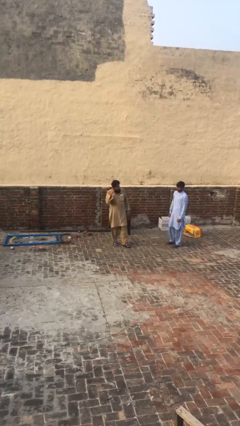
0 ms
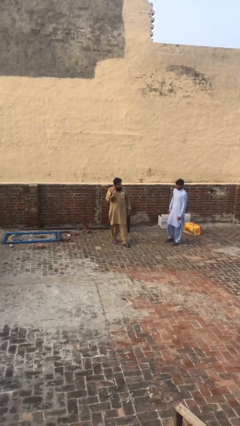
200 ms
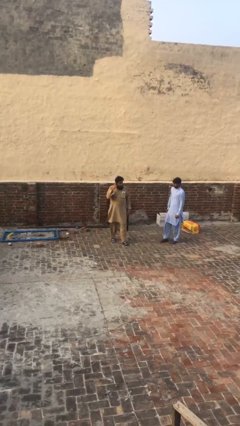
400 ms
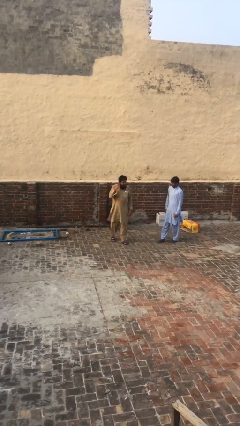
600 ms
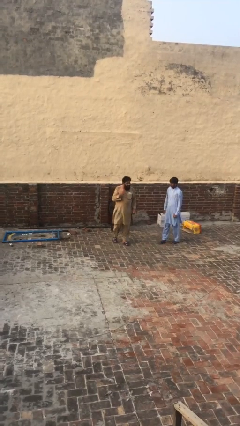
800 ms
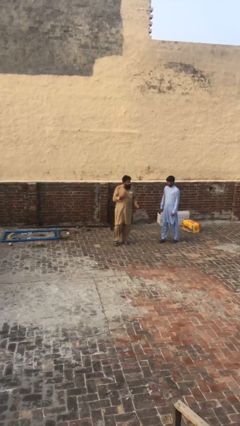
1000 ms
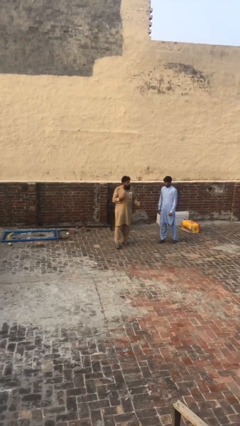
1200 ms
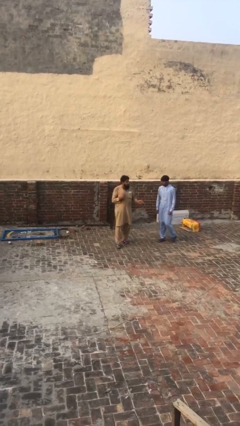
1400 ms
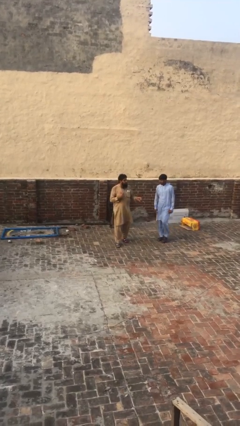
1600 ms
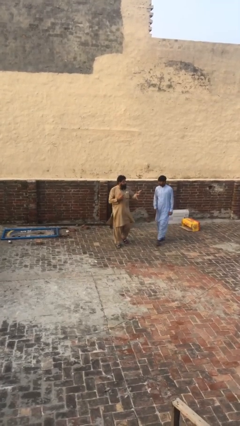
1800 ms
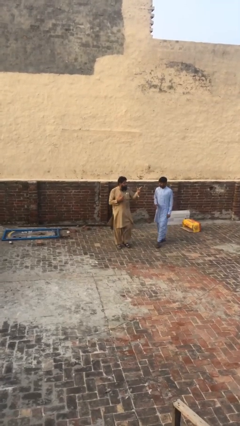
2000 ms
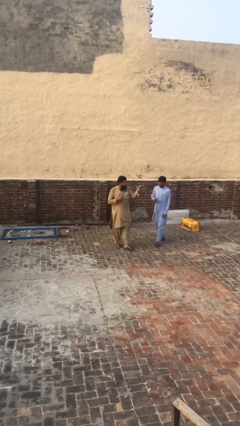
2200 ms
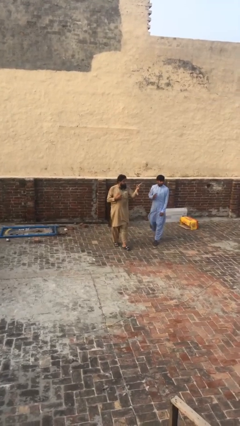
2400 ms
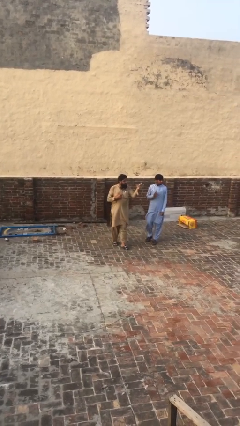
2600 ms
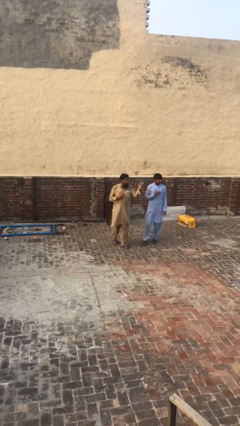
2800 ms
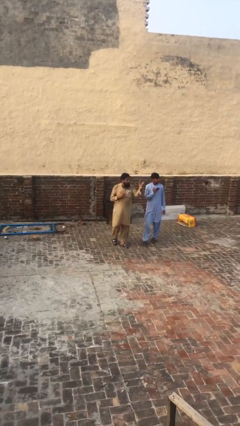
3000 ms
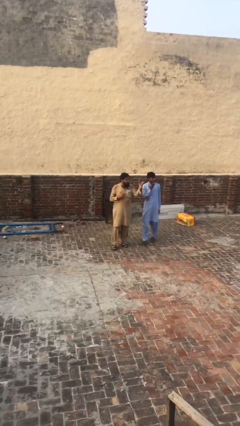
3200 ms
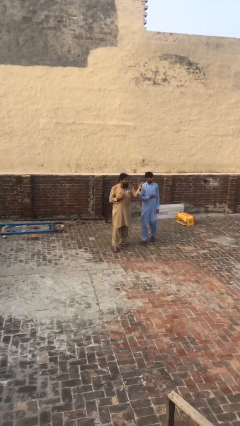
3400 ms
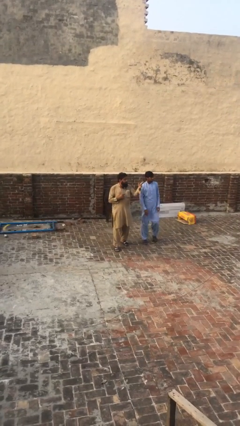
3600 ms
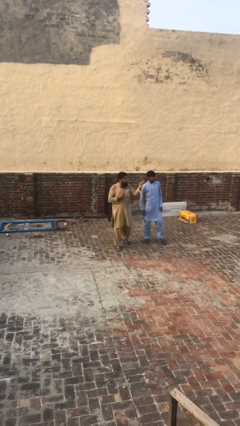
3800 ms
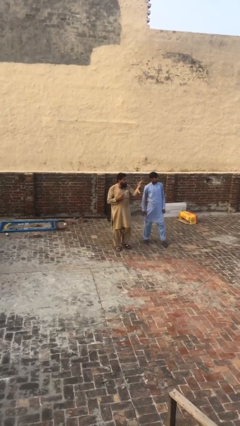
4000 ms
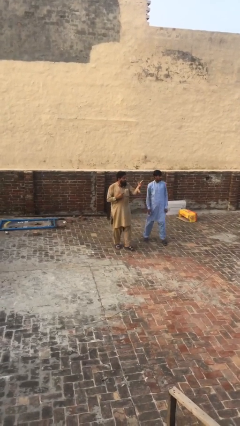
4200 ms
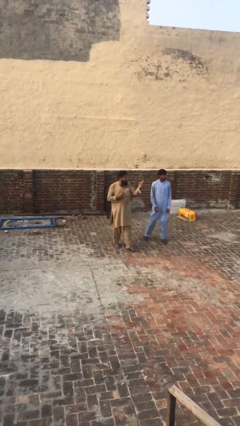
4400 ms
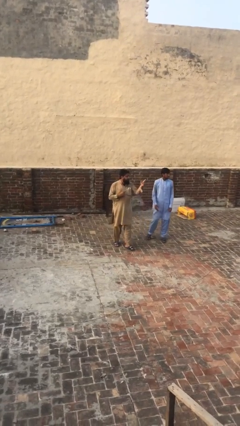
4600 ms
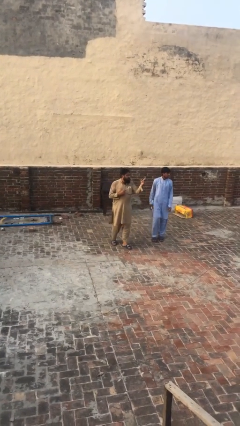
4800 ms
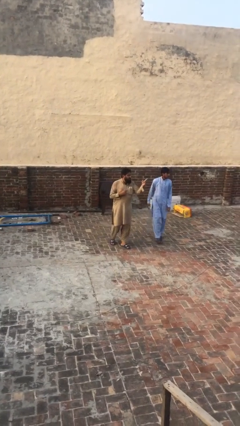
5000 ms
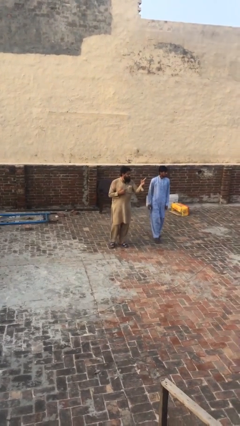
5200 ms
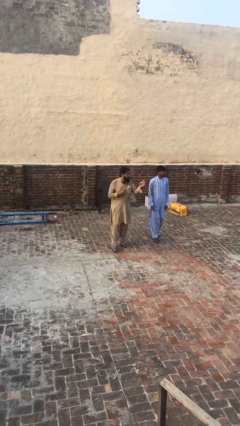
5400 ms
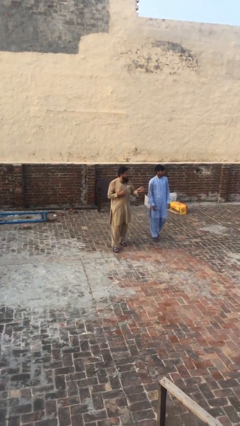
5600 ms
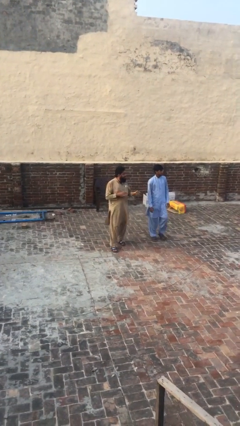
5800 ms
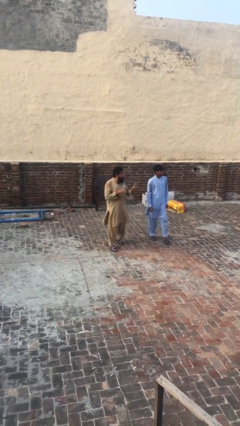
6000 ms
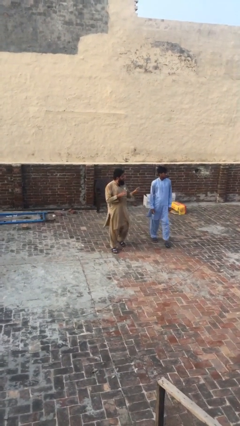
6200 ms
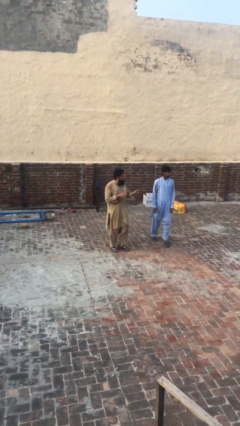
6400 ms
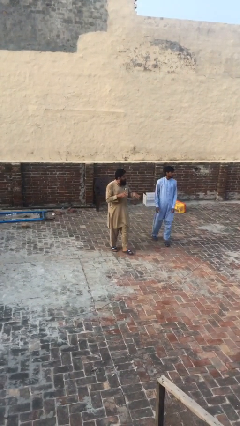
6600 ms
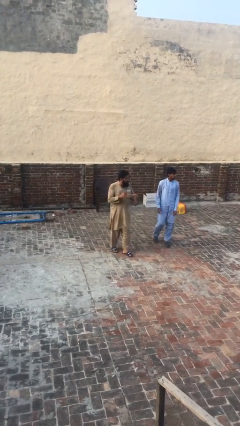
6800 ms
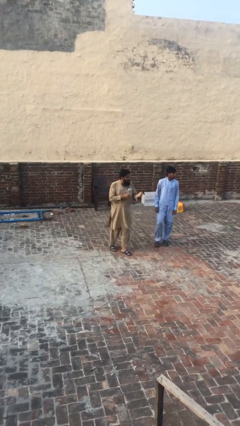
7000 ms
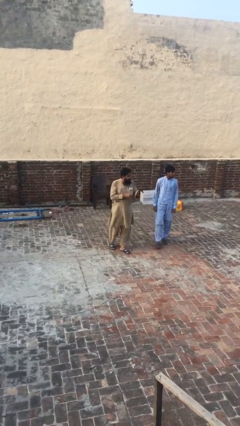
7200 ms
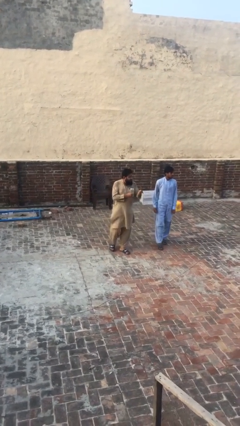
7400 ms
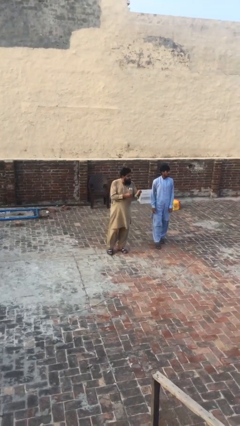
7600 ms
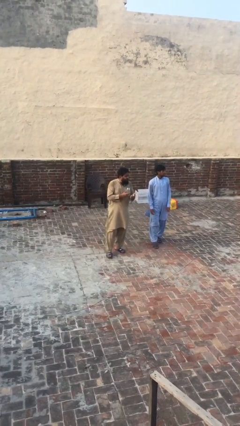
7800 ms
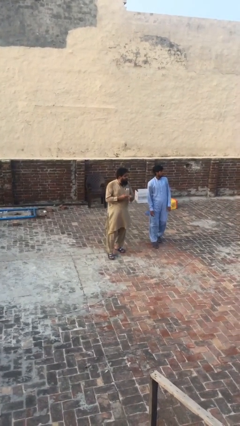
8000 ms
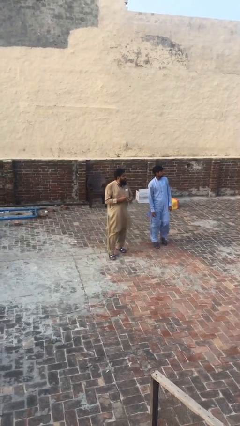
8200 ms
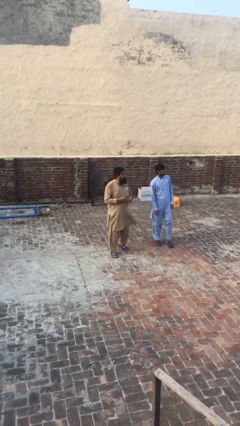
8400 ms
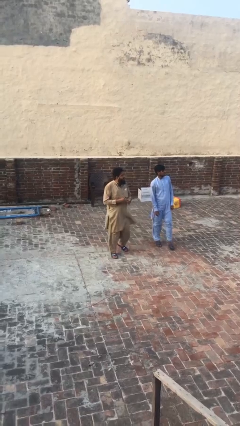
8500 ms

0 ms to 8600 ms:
person talks to person

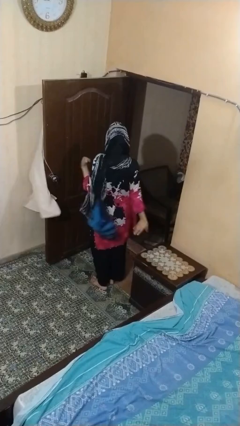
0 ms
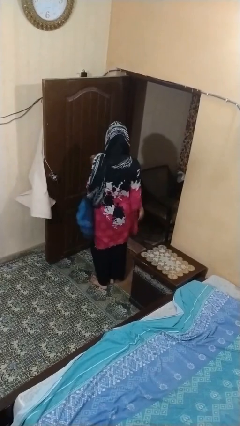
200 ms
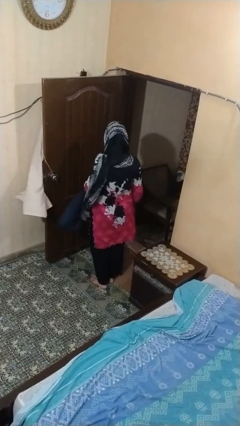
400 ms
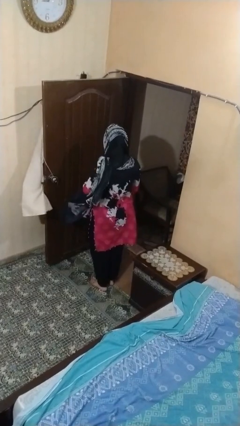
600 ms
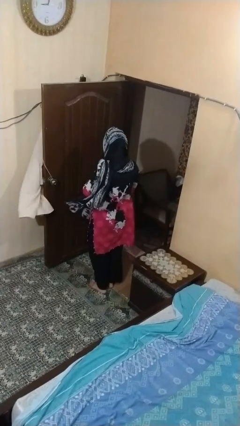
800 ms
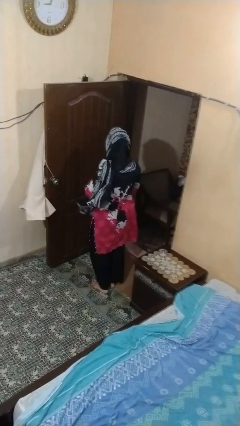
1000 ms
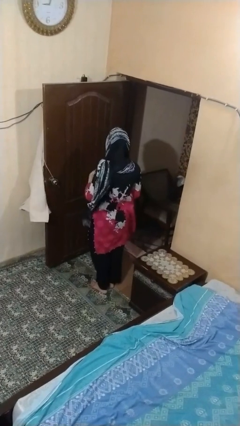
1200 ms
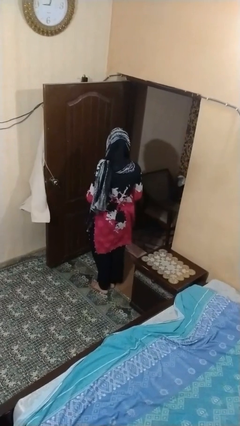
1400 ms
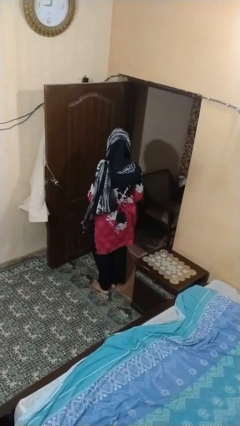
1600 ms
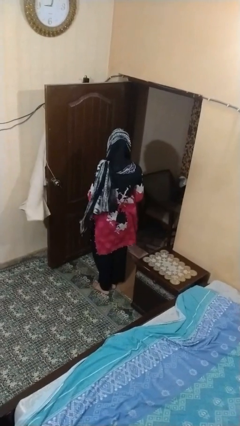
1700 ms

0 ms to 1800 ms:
person takes off backpack

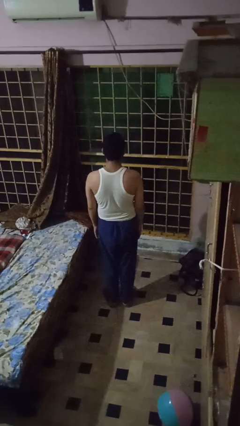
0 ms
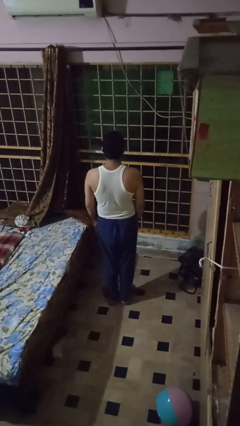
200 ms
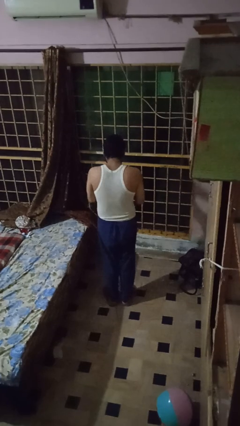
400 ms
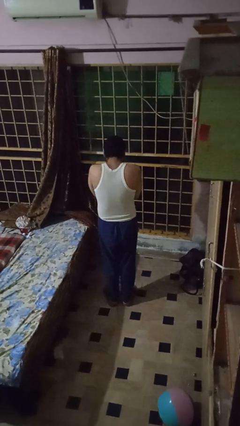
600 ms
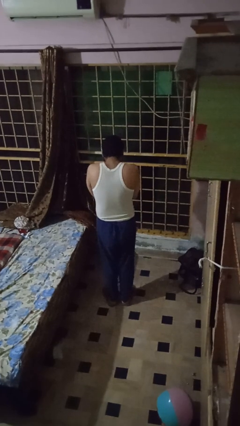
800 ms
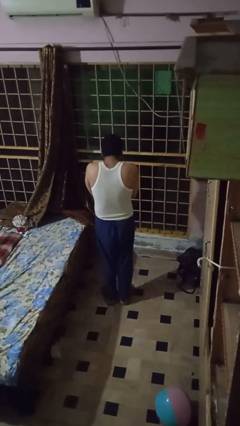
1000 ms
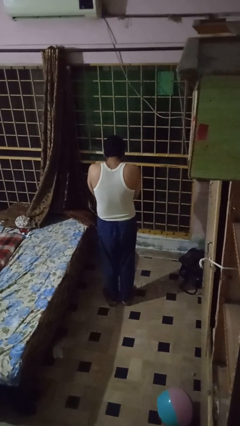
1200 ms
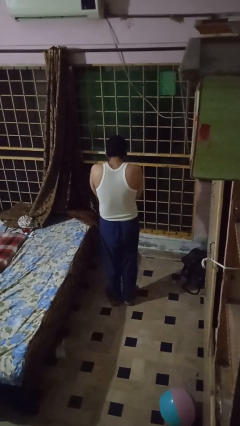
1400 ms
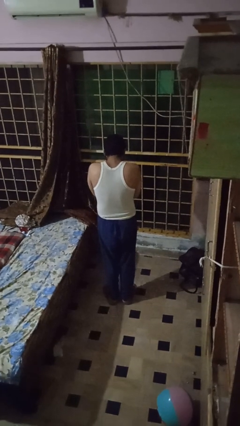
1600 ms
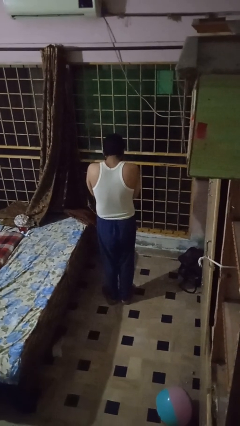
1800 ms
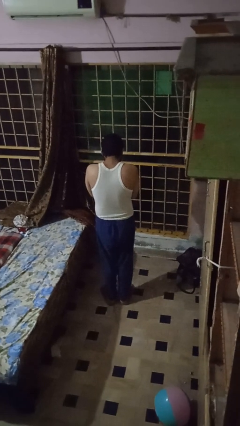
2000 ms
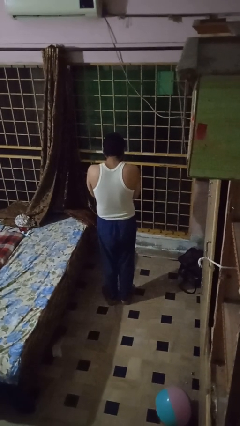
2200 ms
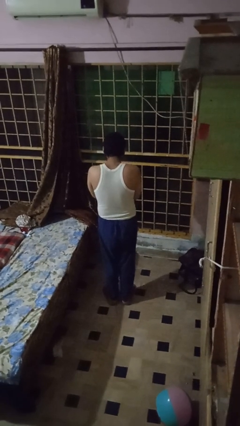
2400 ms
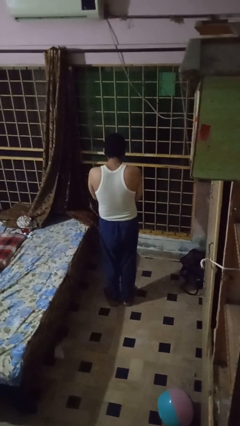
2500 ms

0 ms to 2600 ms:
person covers face with hands

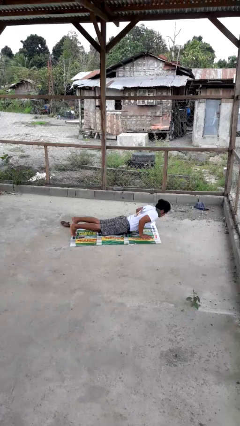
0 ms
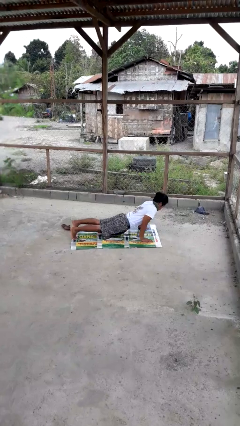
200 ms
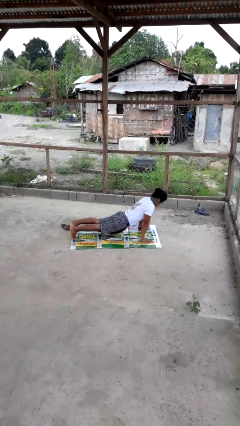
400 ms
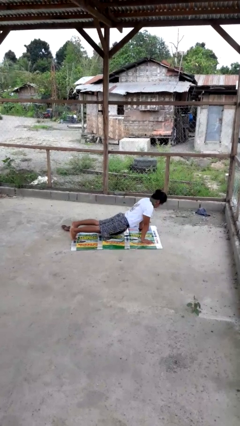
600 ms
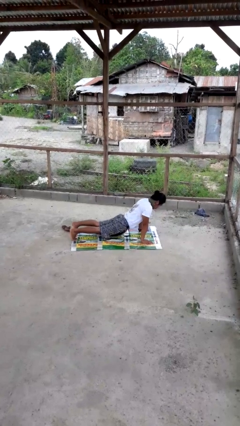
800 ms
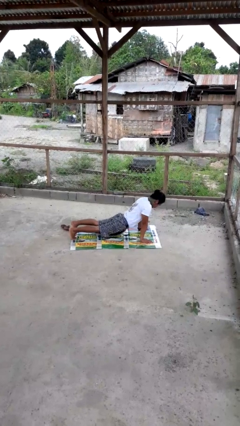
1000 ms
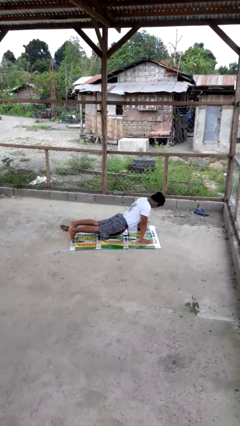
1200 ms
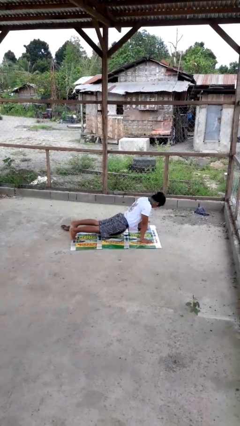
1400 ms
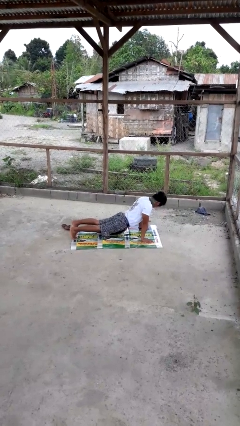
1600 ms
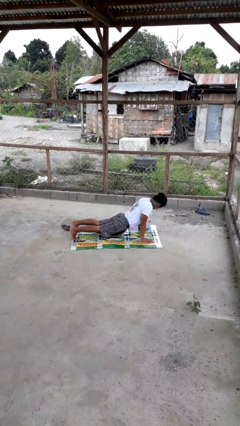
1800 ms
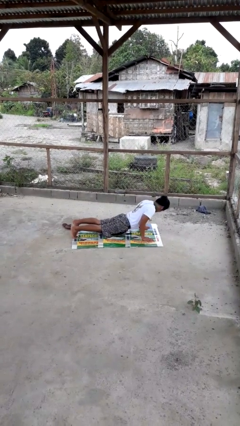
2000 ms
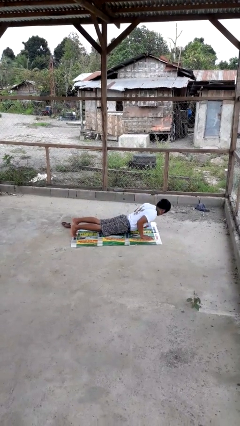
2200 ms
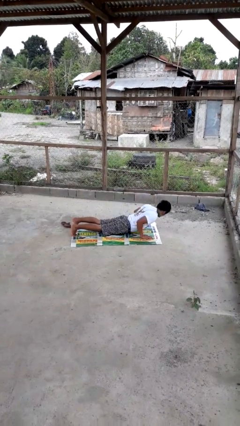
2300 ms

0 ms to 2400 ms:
person exercises with pushup

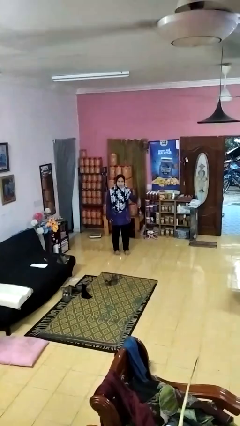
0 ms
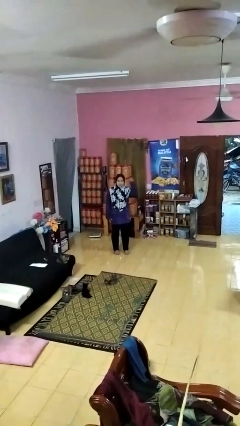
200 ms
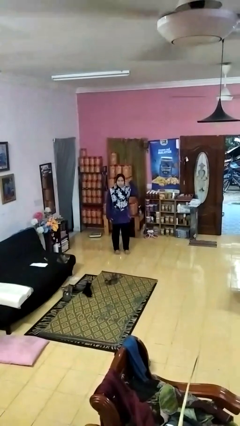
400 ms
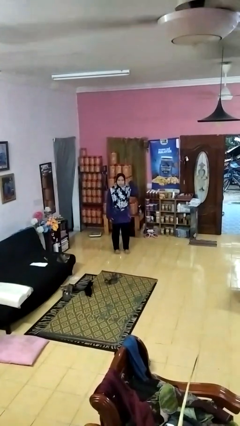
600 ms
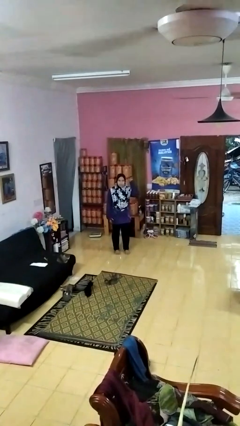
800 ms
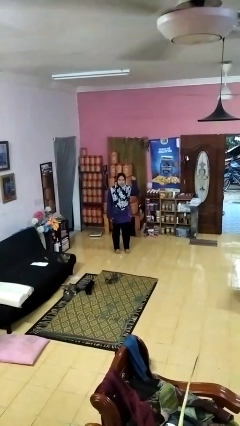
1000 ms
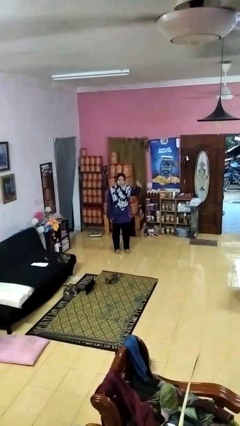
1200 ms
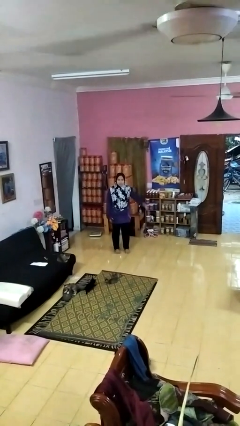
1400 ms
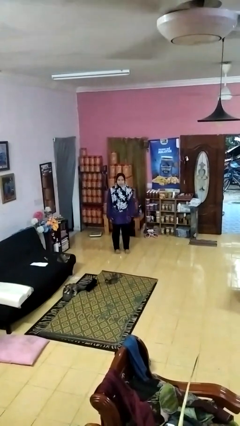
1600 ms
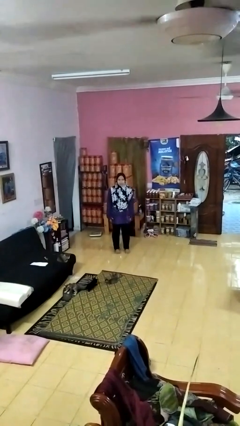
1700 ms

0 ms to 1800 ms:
person gestures behind me
